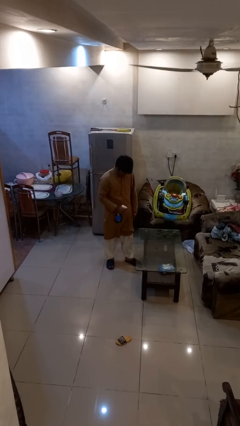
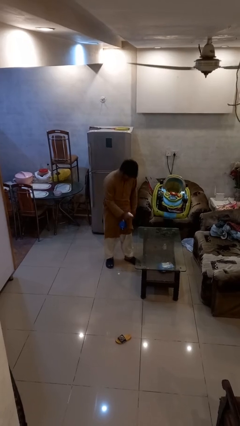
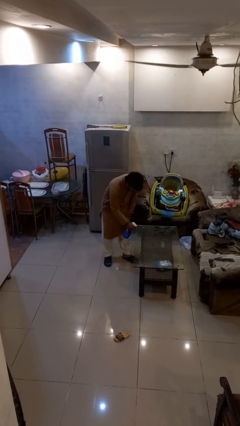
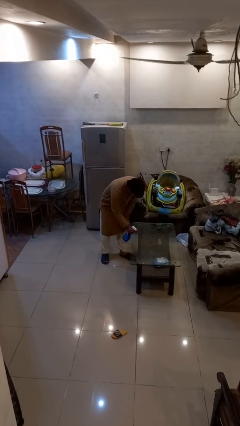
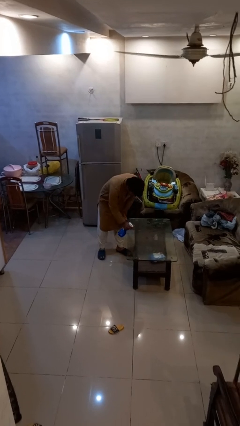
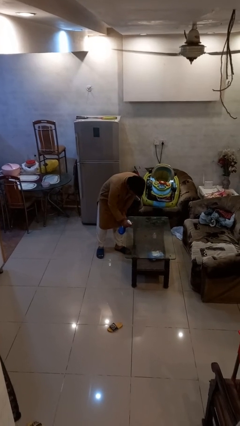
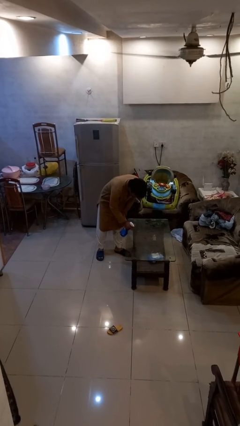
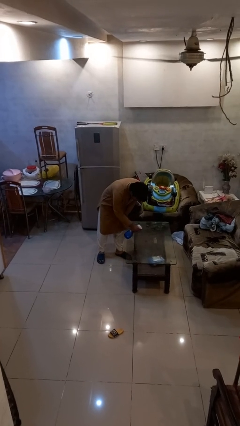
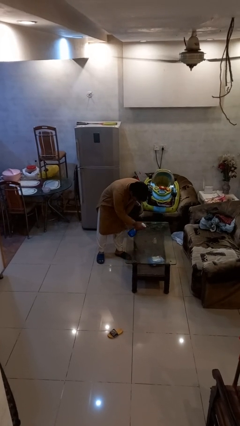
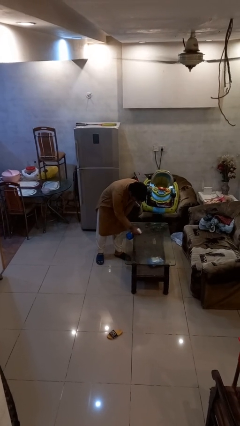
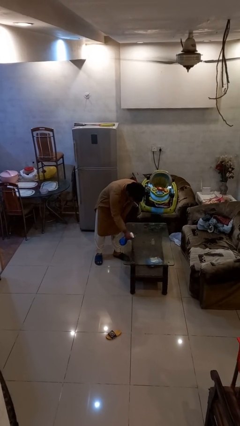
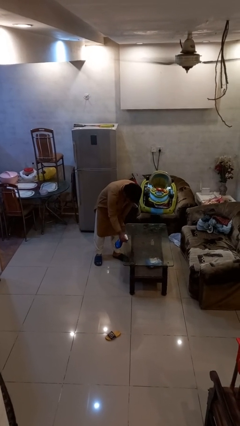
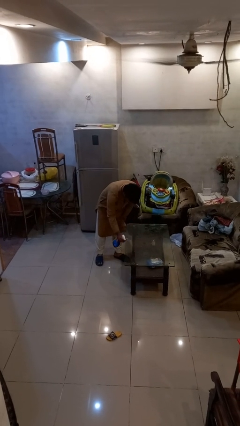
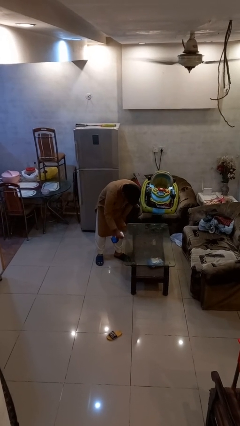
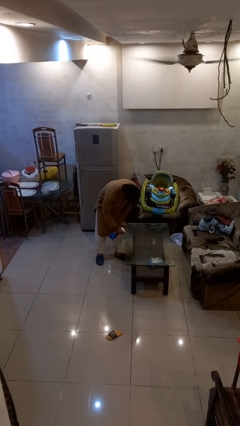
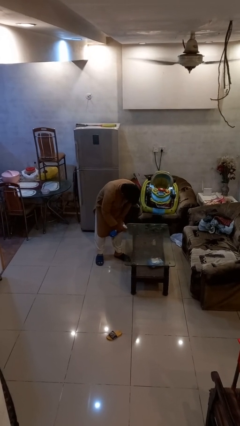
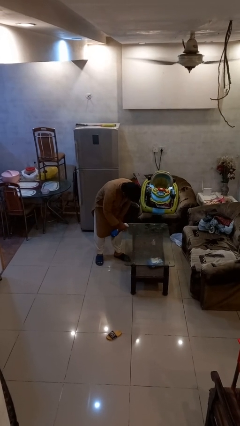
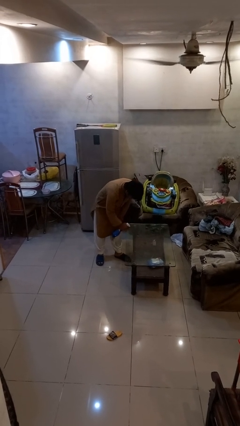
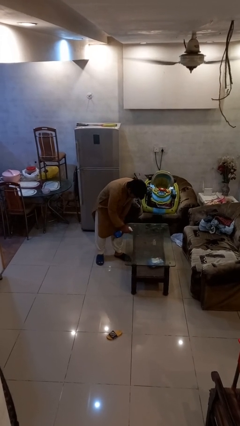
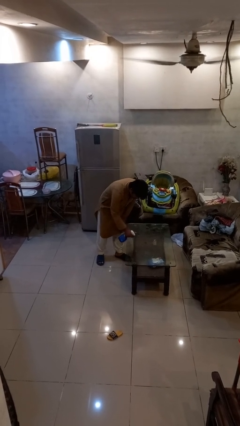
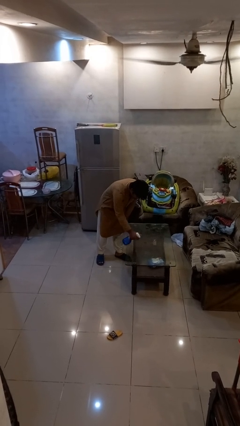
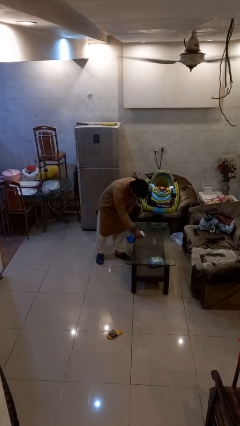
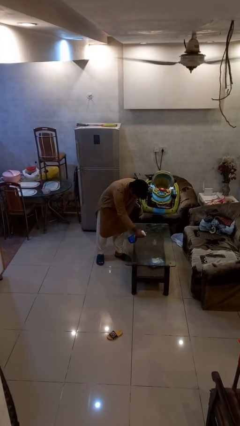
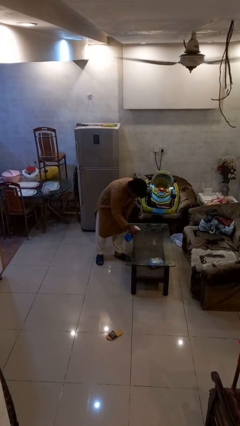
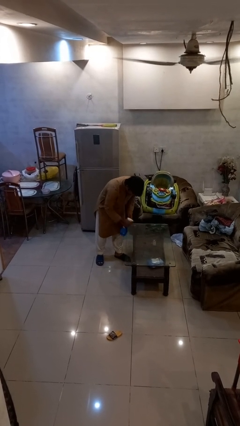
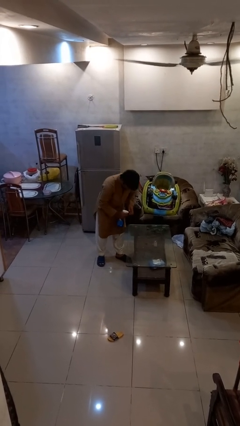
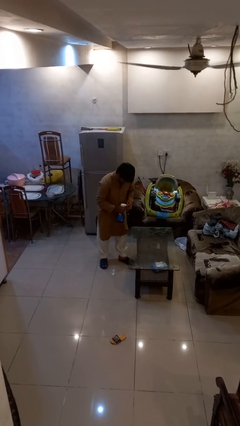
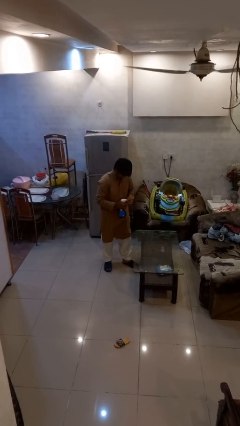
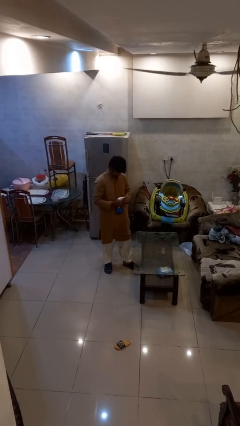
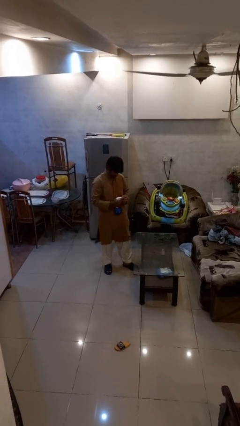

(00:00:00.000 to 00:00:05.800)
person sprays from bottle

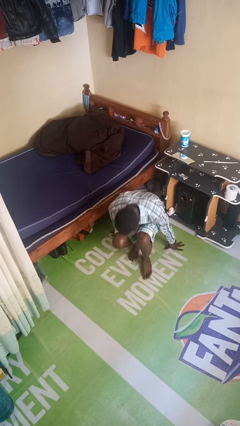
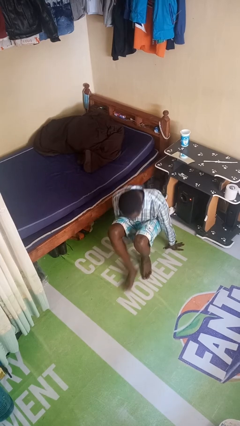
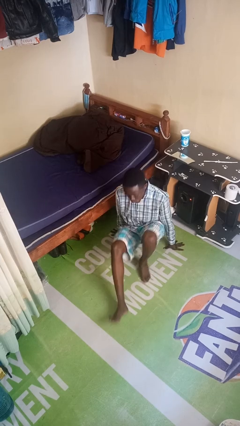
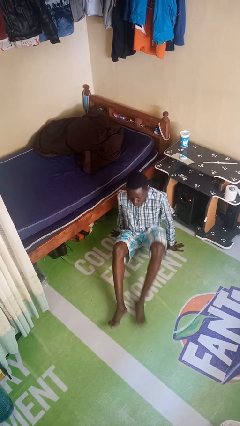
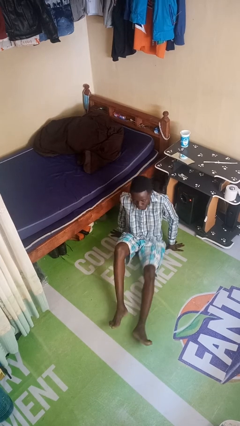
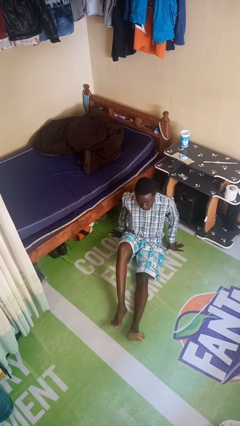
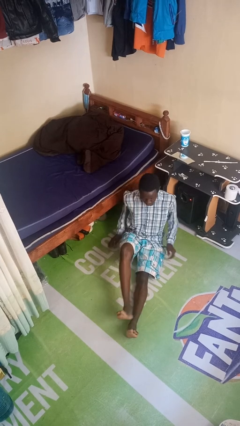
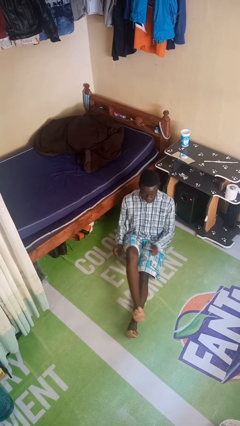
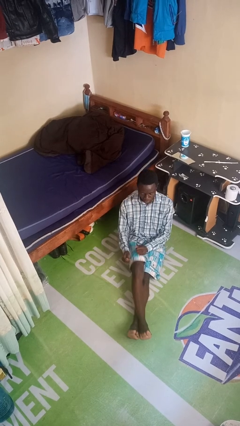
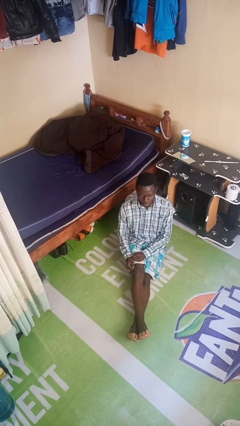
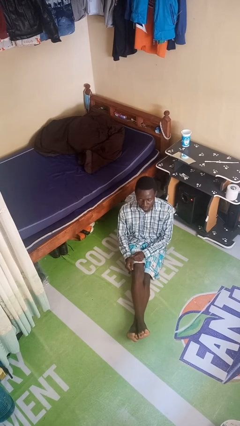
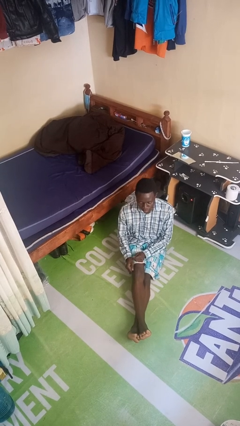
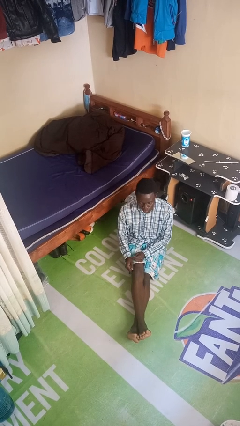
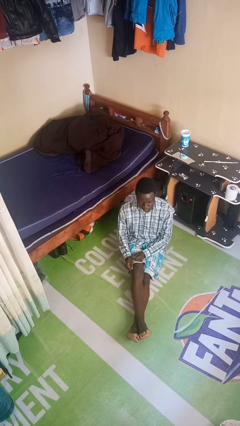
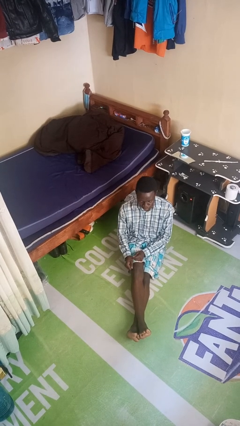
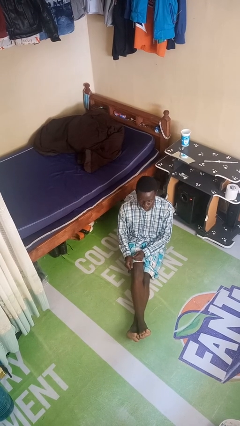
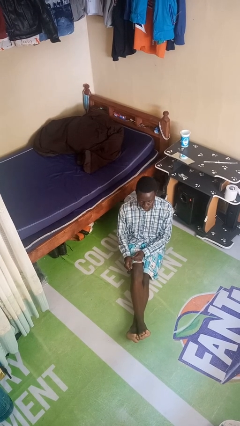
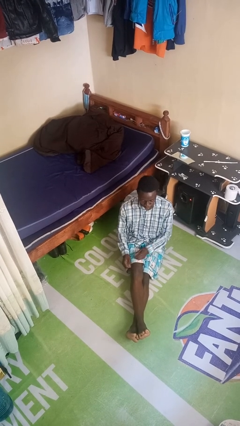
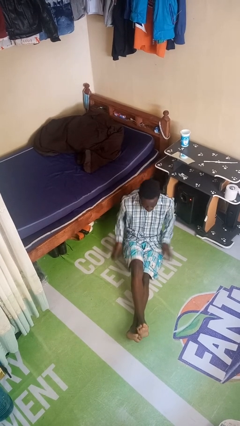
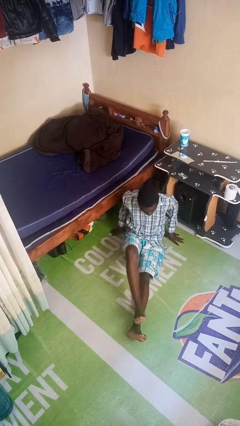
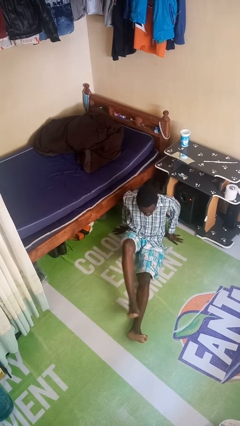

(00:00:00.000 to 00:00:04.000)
person sits crisscross

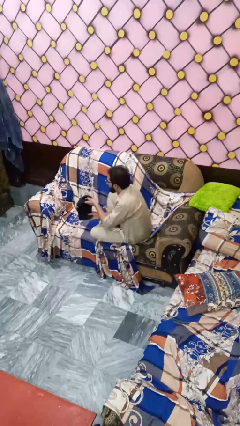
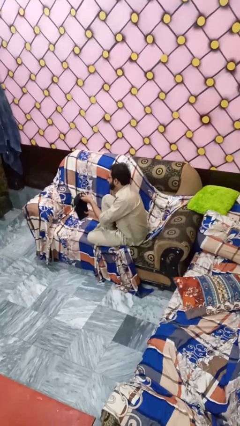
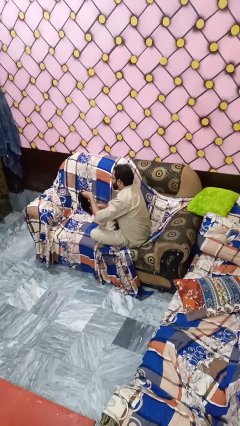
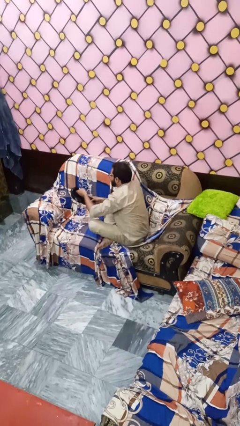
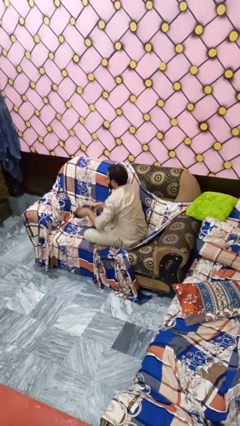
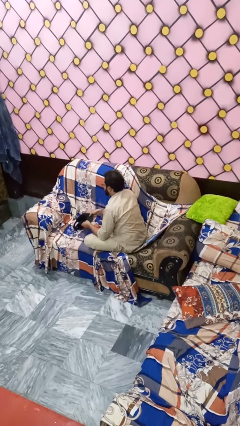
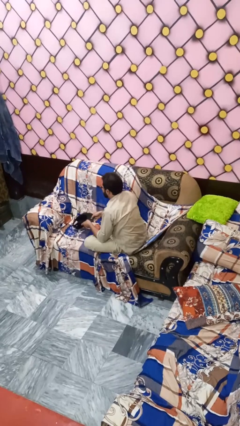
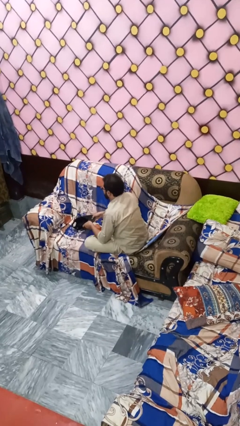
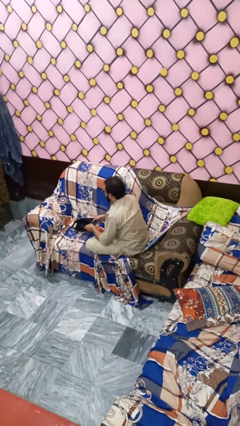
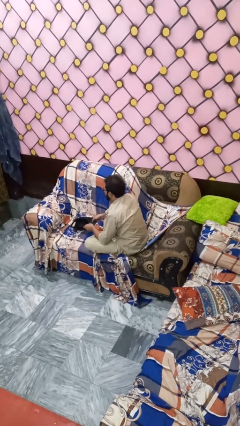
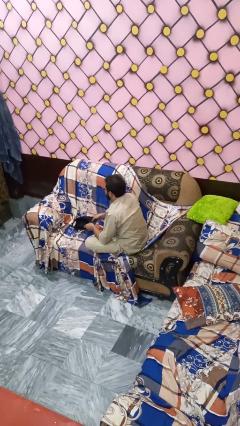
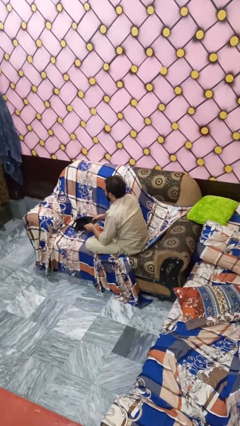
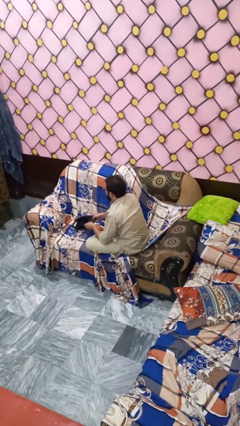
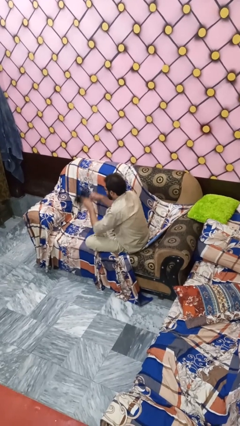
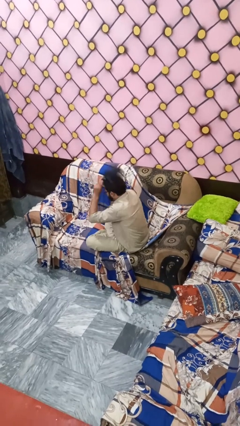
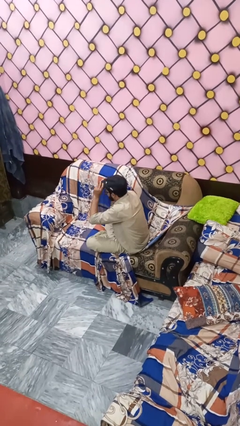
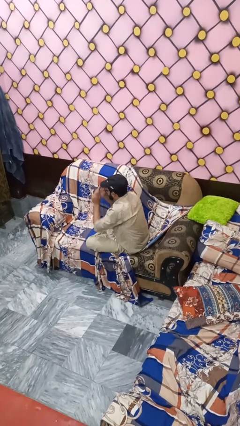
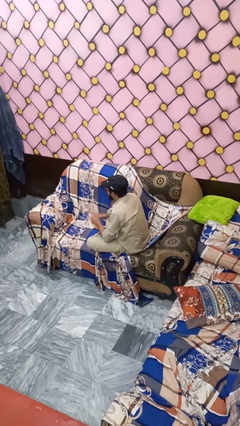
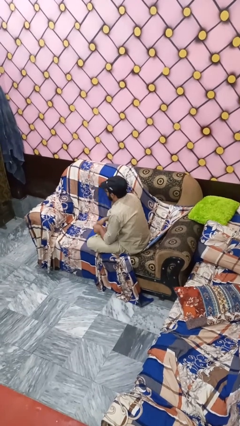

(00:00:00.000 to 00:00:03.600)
person holds object above head

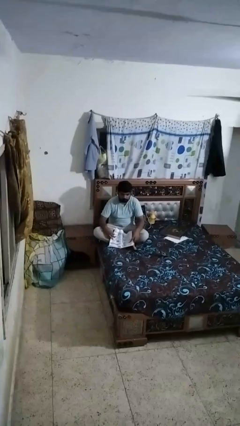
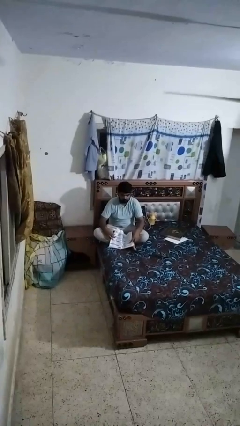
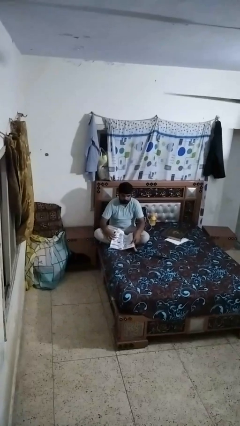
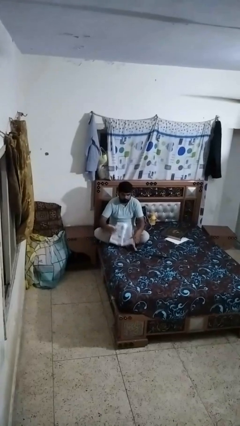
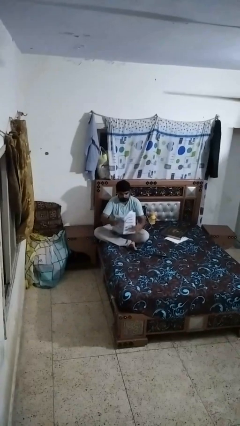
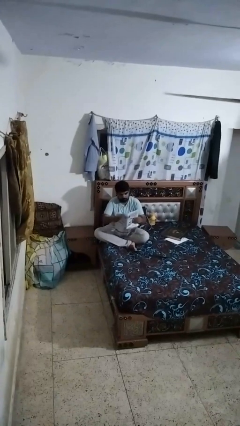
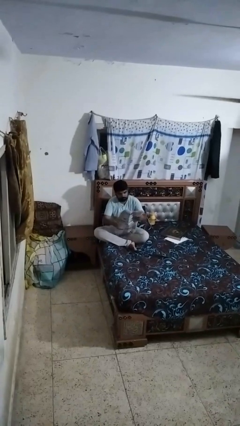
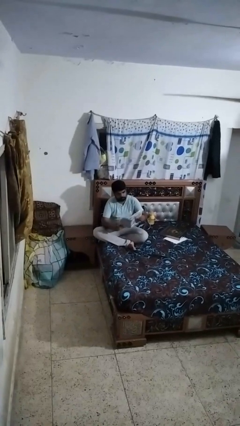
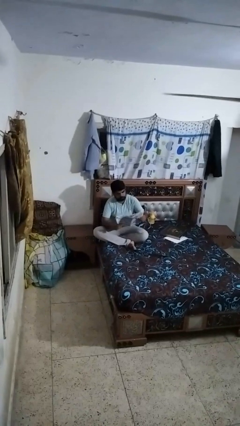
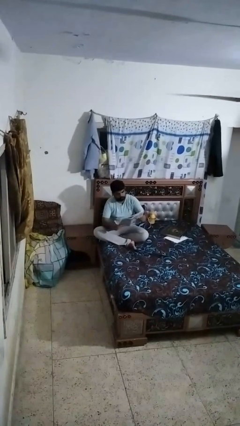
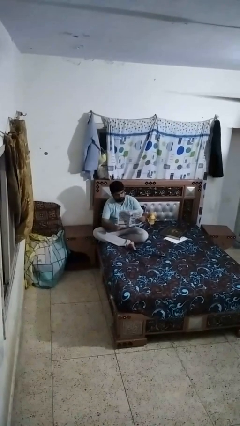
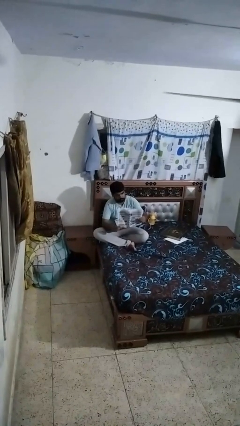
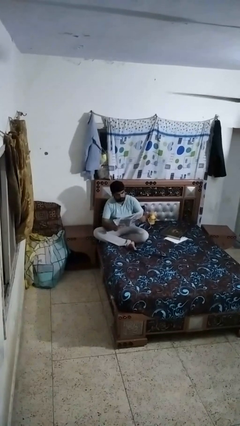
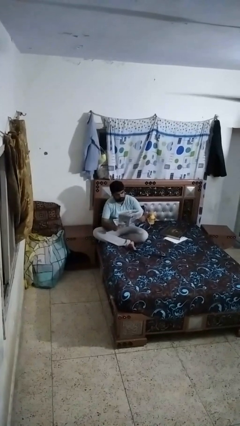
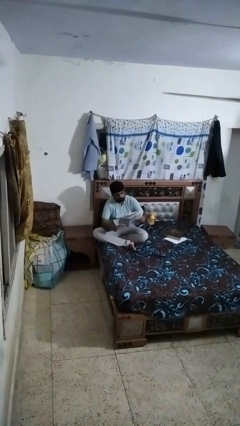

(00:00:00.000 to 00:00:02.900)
person reads newspaper

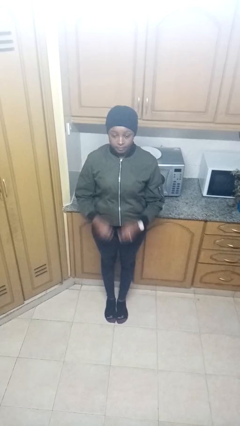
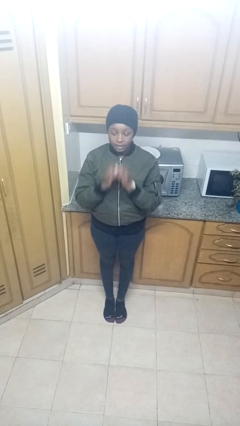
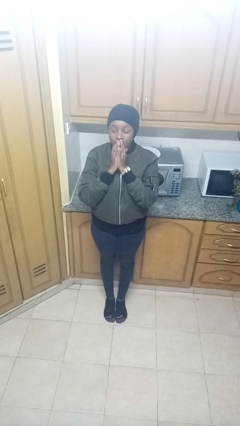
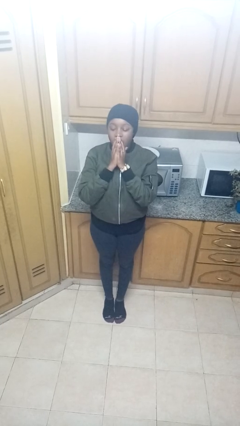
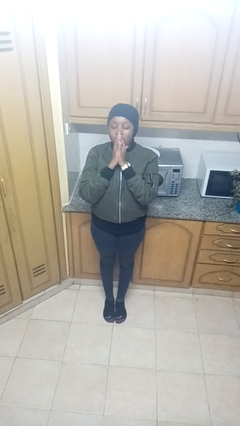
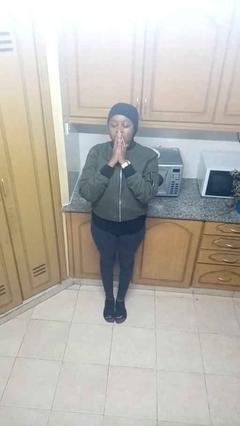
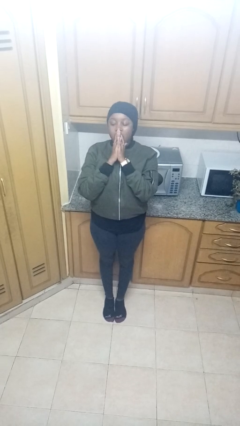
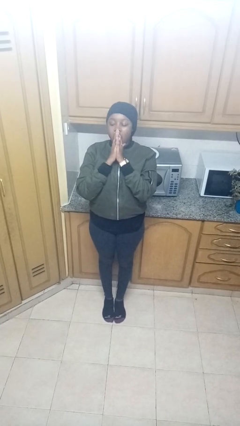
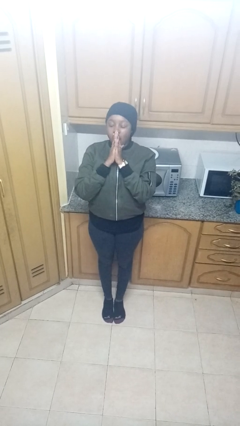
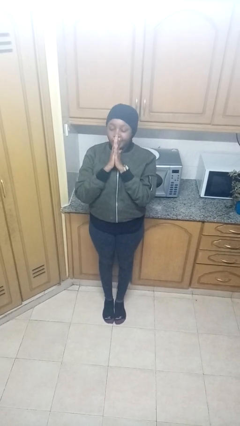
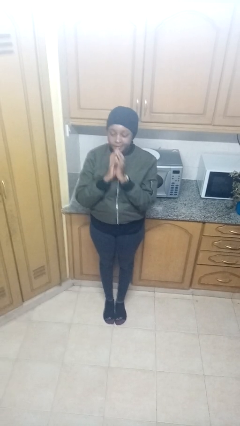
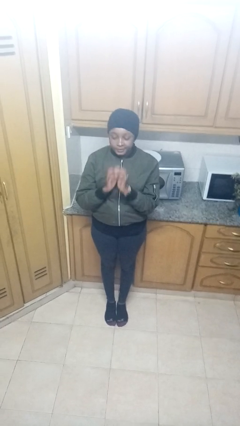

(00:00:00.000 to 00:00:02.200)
person yawns
